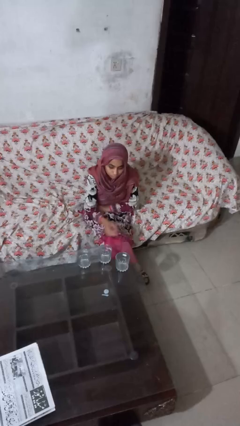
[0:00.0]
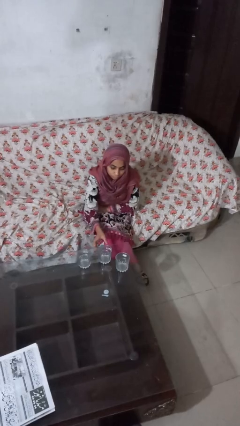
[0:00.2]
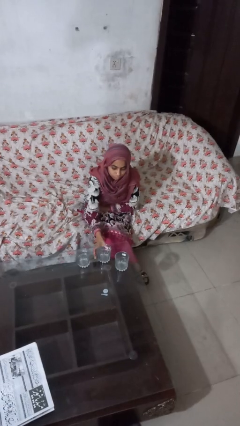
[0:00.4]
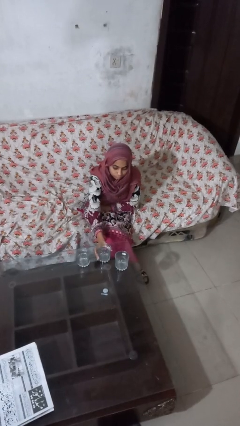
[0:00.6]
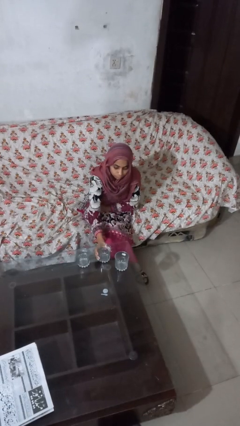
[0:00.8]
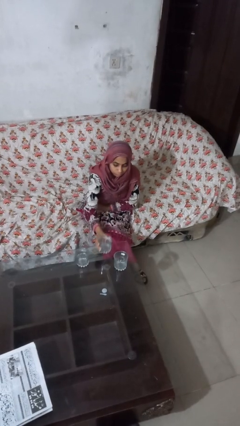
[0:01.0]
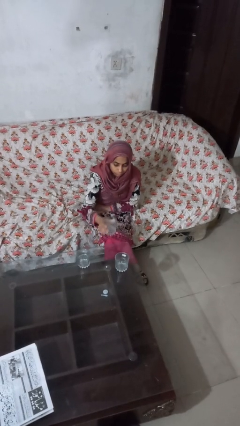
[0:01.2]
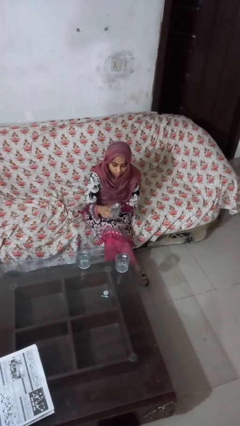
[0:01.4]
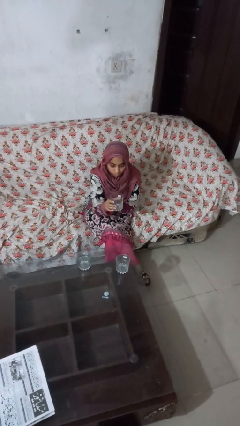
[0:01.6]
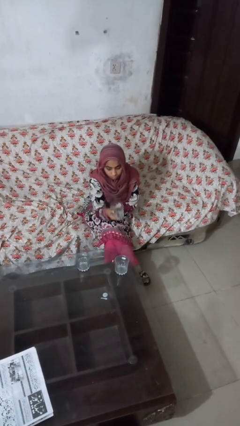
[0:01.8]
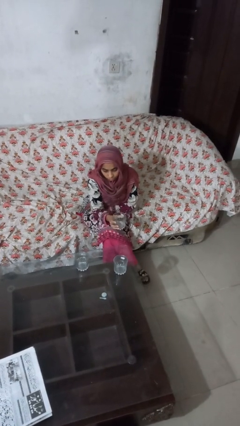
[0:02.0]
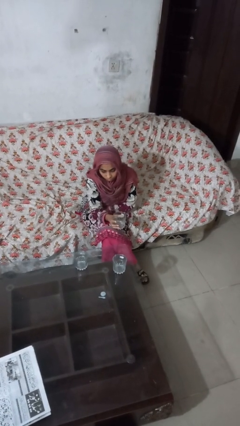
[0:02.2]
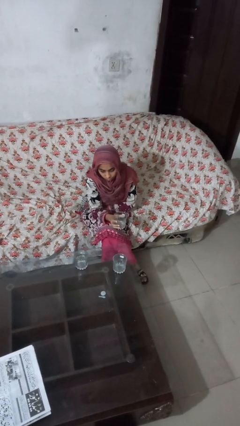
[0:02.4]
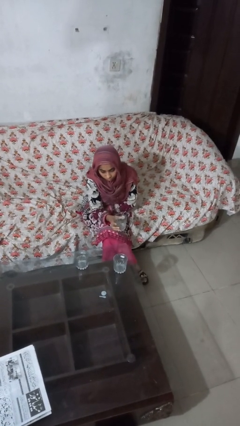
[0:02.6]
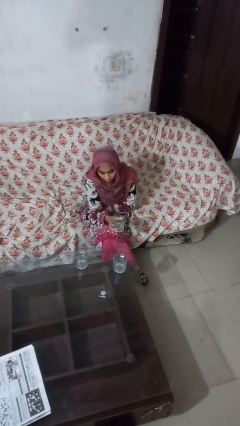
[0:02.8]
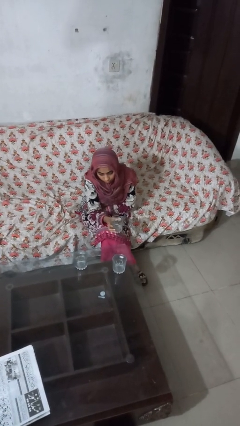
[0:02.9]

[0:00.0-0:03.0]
person picks up object from table

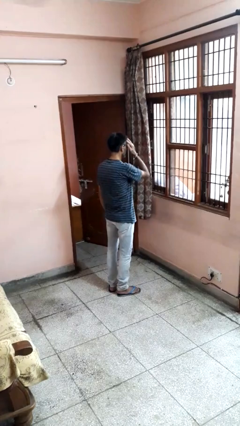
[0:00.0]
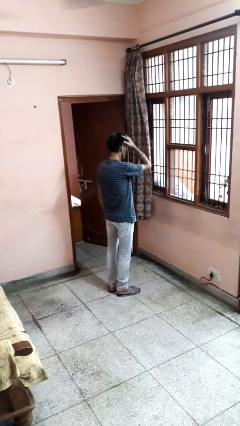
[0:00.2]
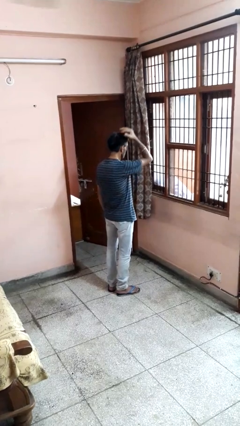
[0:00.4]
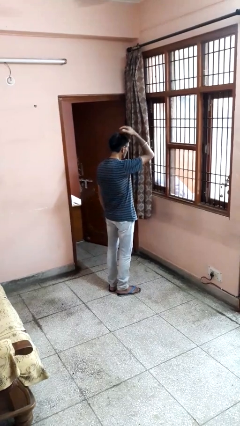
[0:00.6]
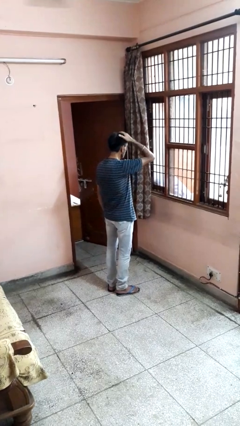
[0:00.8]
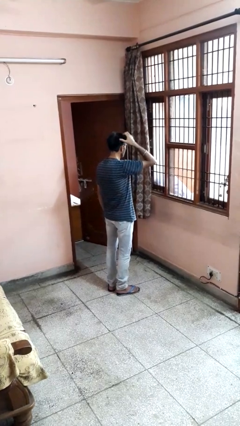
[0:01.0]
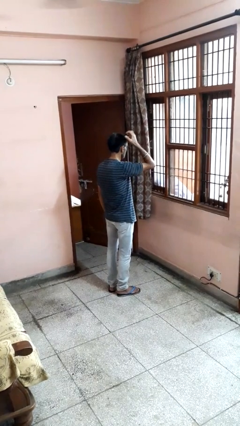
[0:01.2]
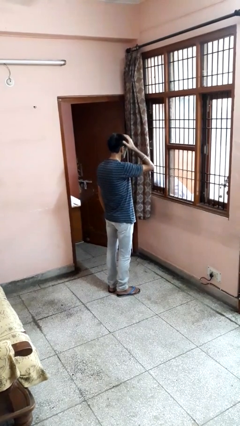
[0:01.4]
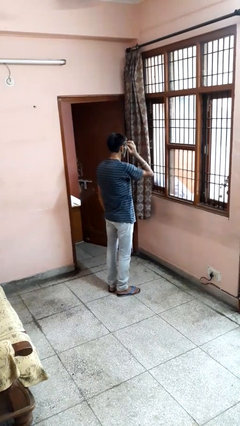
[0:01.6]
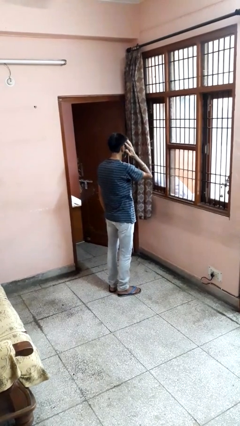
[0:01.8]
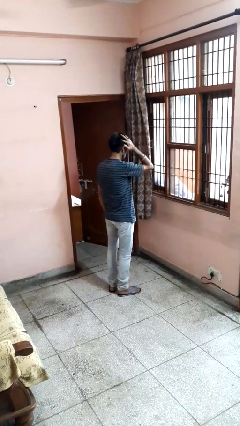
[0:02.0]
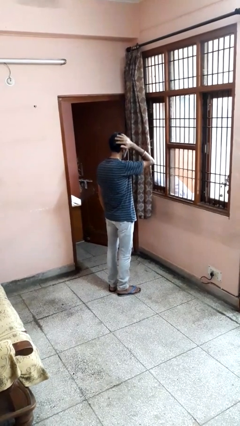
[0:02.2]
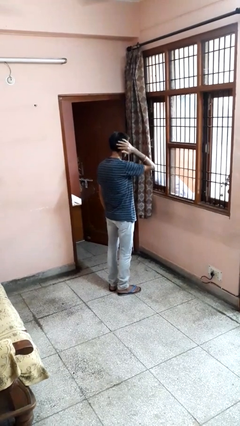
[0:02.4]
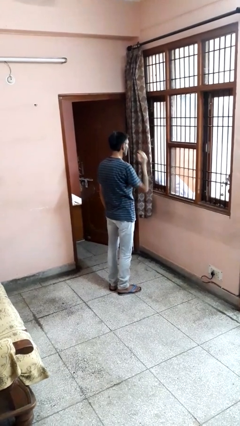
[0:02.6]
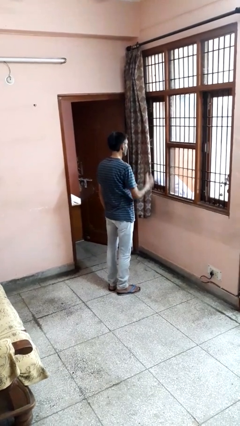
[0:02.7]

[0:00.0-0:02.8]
person strokes hair

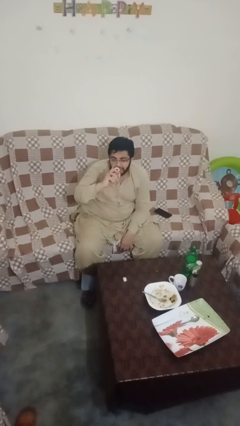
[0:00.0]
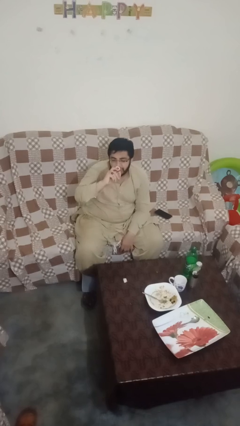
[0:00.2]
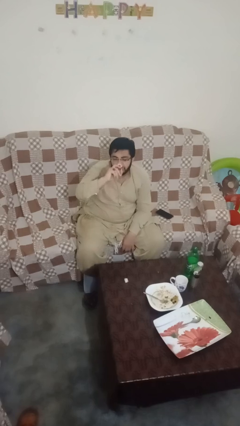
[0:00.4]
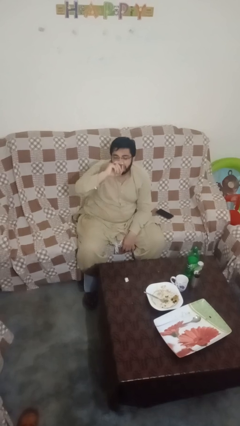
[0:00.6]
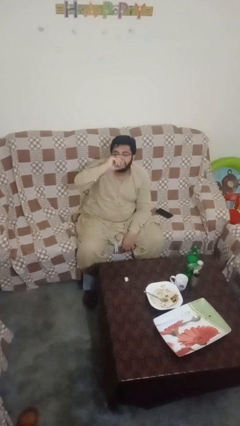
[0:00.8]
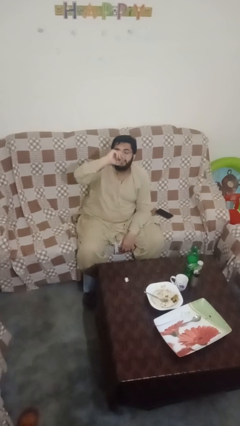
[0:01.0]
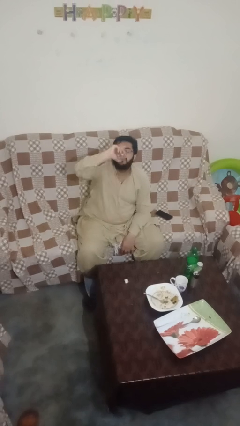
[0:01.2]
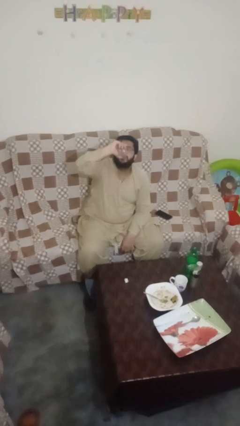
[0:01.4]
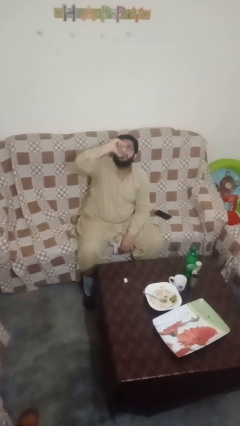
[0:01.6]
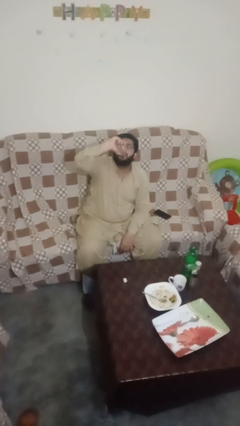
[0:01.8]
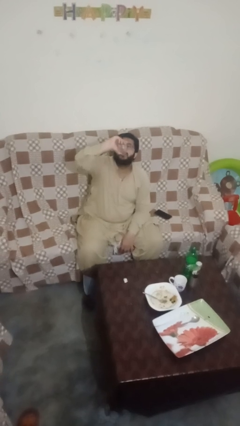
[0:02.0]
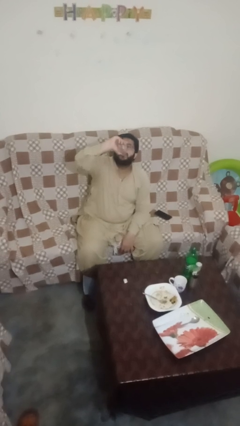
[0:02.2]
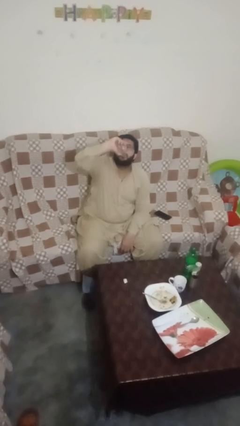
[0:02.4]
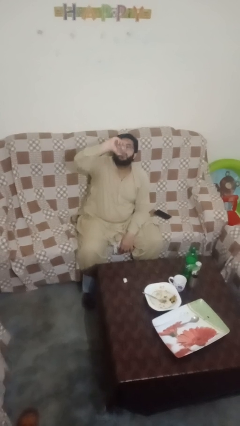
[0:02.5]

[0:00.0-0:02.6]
person drinks from shotglass

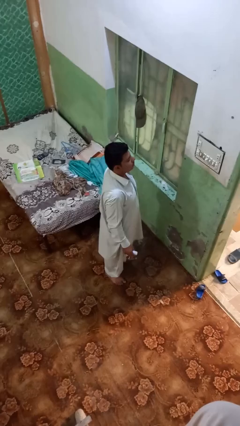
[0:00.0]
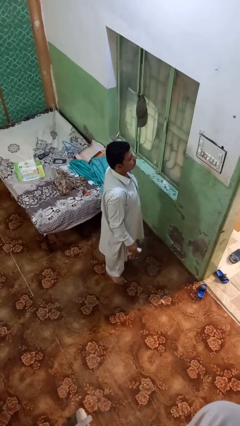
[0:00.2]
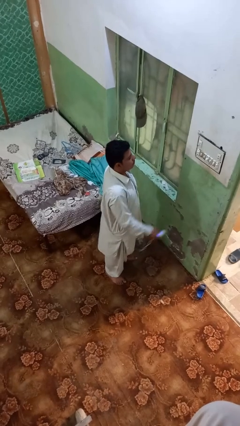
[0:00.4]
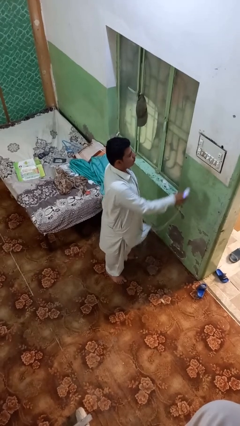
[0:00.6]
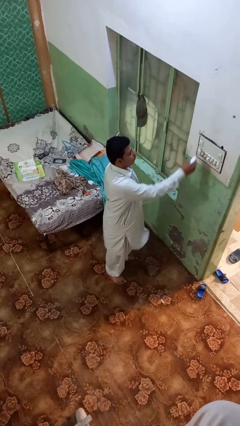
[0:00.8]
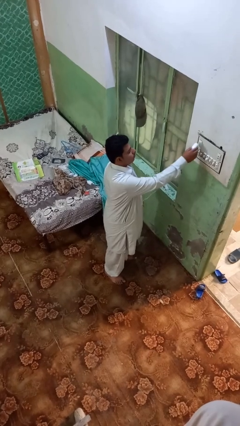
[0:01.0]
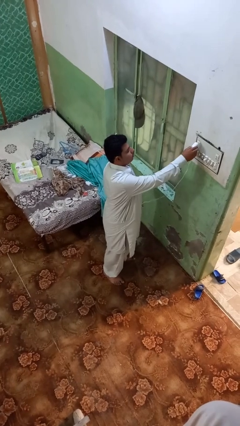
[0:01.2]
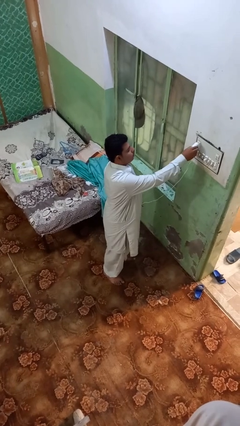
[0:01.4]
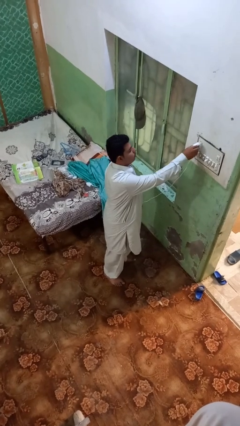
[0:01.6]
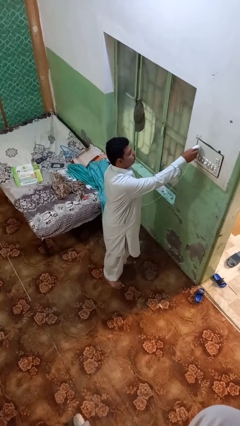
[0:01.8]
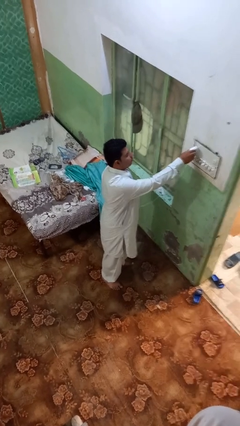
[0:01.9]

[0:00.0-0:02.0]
person plugs into electrical socket

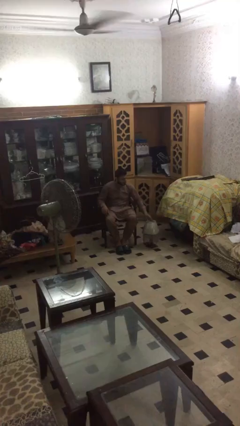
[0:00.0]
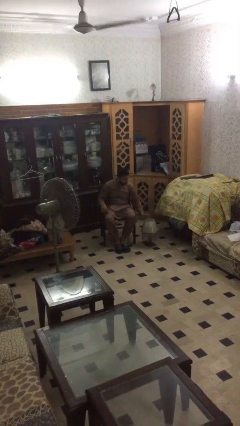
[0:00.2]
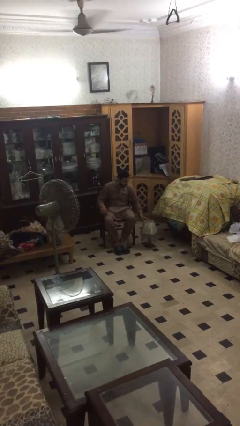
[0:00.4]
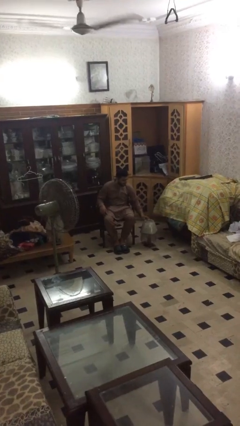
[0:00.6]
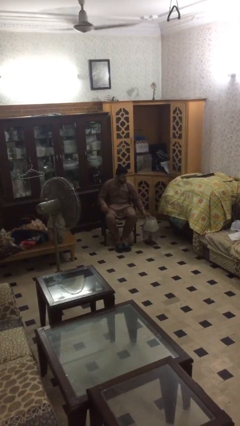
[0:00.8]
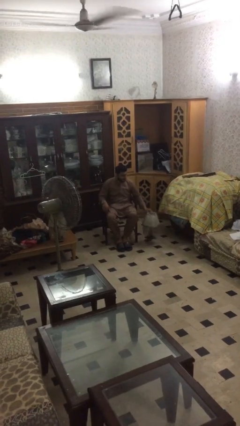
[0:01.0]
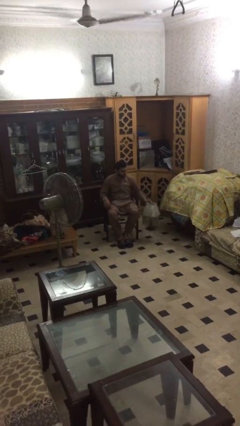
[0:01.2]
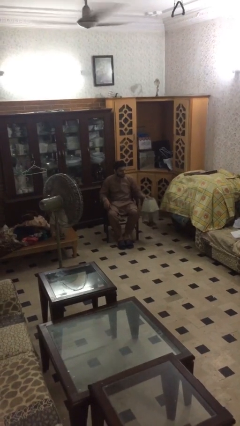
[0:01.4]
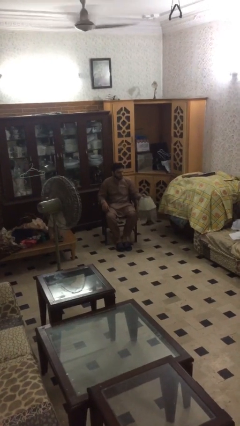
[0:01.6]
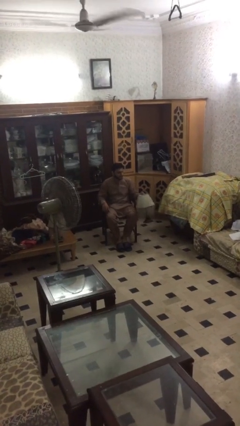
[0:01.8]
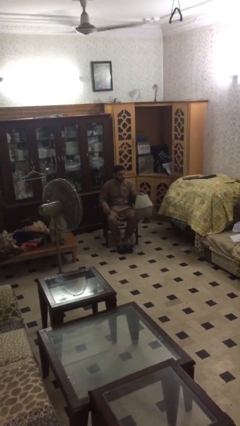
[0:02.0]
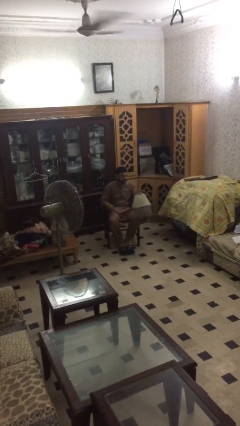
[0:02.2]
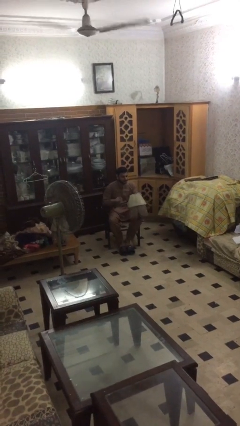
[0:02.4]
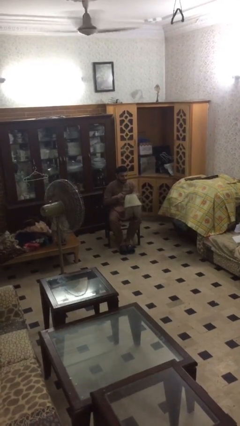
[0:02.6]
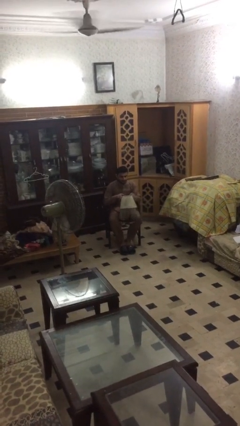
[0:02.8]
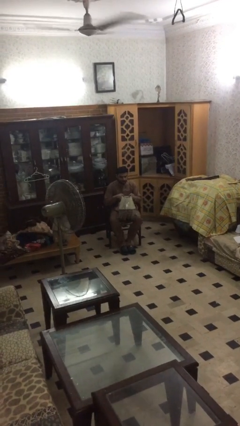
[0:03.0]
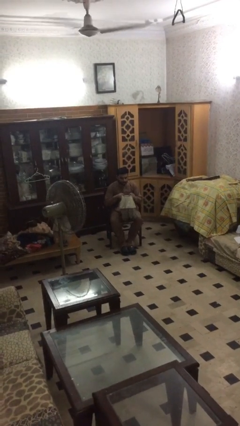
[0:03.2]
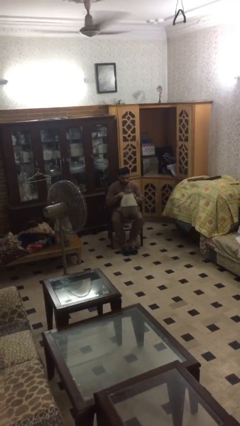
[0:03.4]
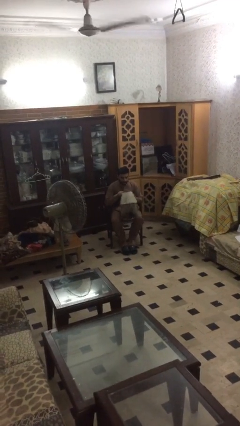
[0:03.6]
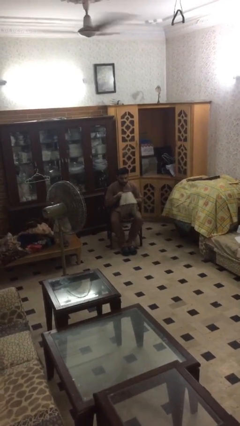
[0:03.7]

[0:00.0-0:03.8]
person picks up object from floor

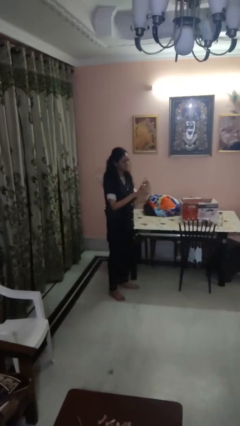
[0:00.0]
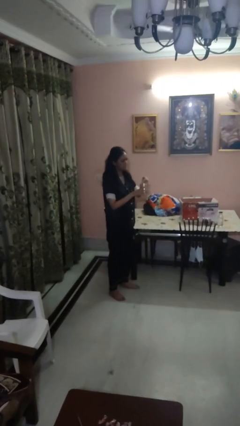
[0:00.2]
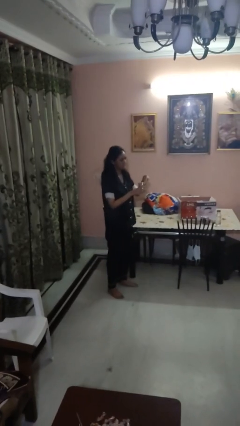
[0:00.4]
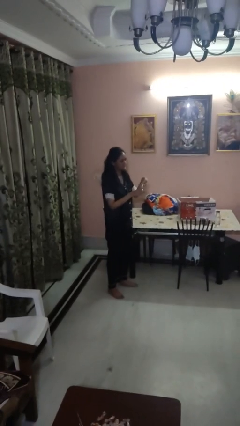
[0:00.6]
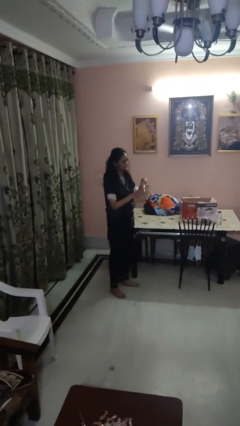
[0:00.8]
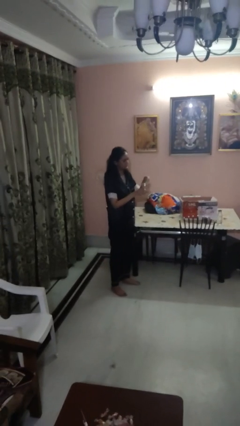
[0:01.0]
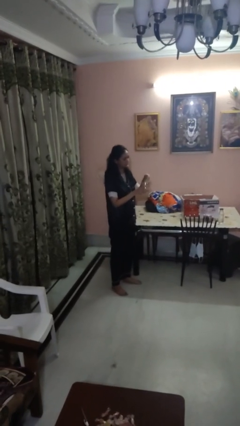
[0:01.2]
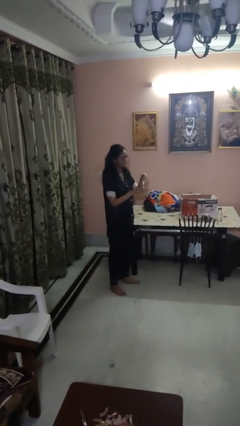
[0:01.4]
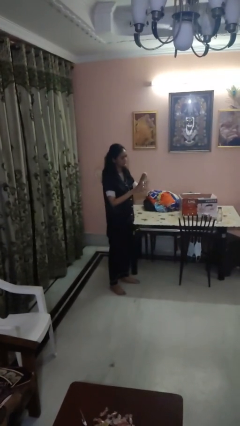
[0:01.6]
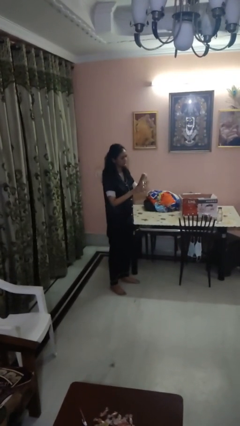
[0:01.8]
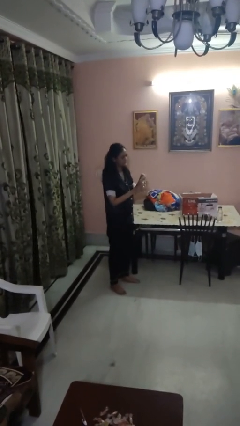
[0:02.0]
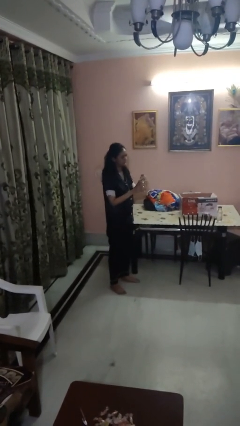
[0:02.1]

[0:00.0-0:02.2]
person opens can with can opener

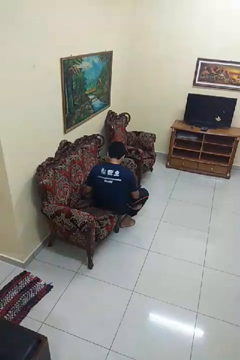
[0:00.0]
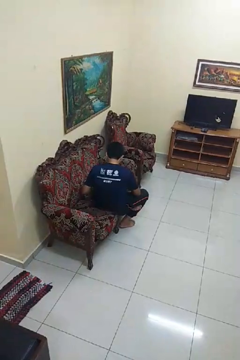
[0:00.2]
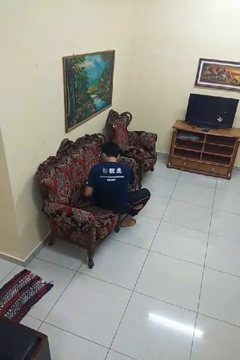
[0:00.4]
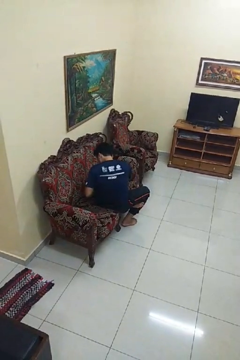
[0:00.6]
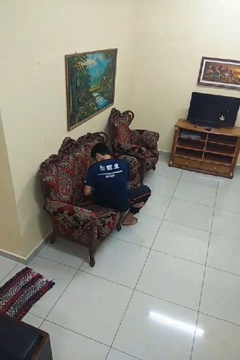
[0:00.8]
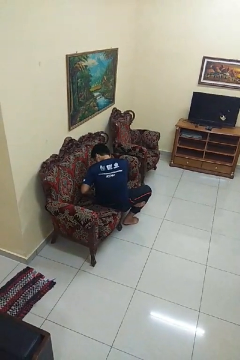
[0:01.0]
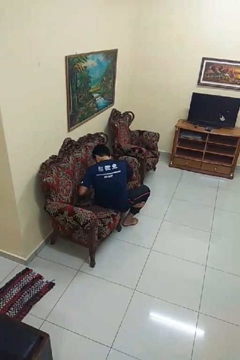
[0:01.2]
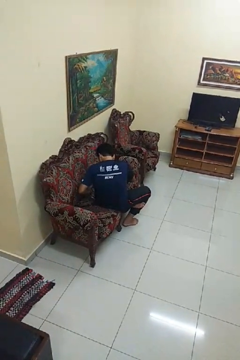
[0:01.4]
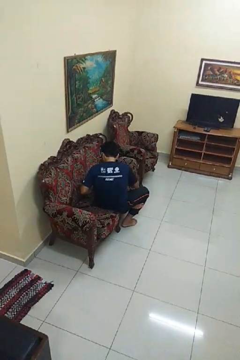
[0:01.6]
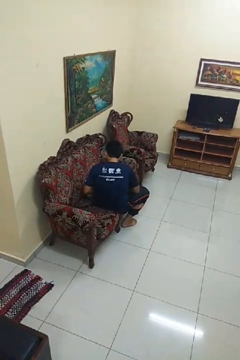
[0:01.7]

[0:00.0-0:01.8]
person searches in couch
